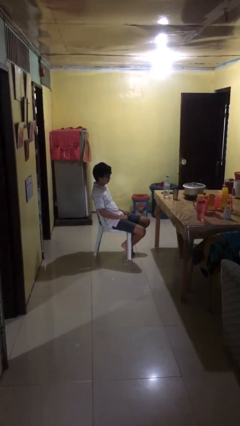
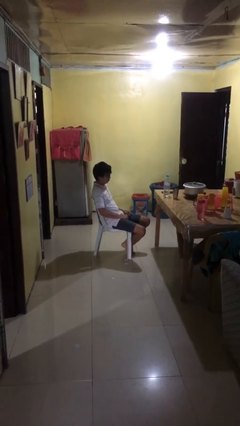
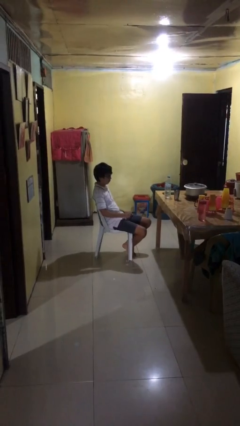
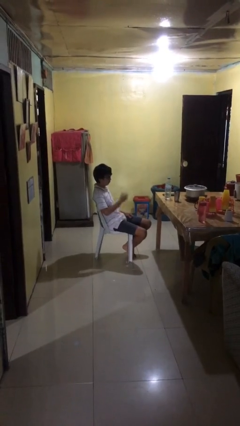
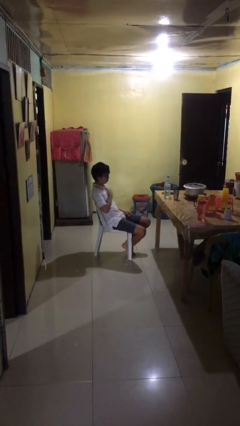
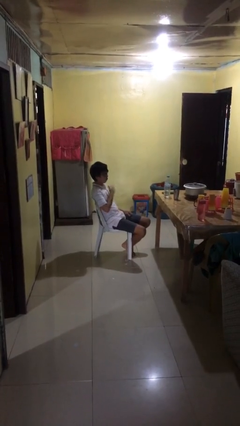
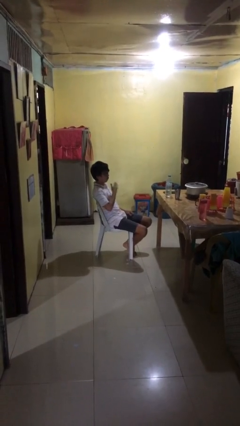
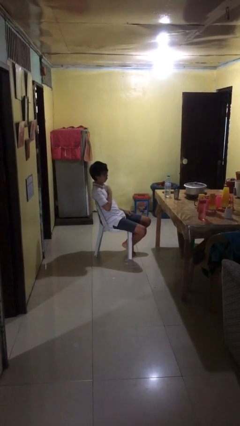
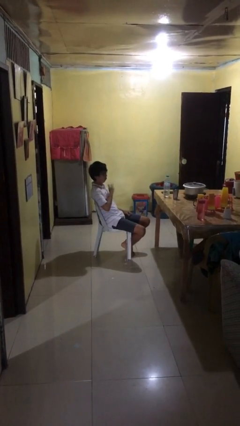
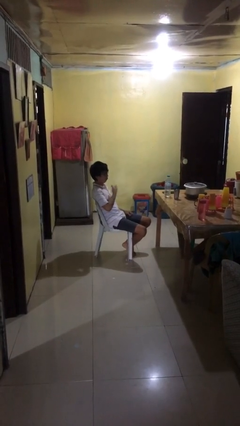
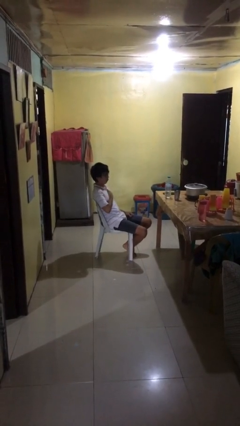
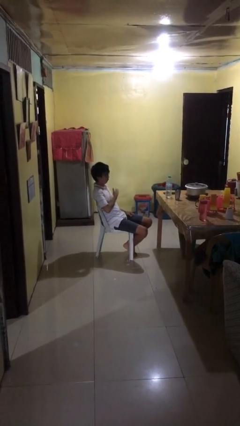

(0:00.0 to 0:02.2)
person drums on chest

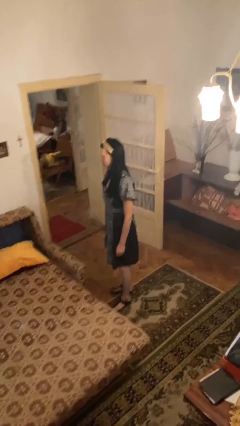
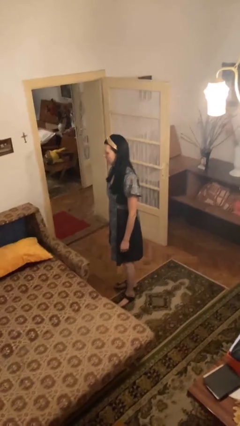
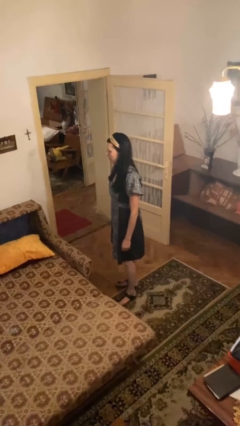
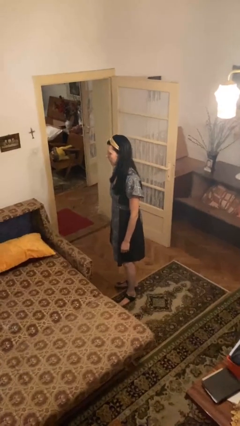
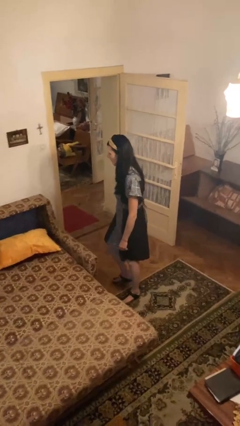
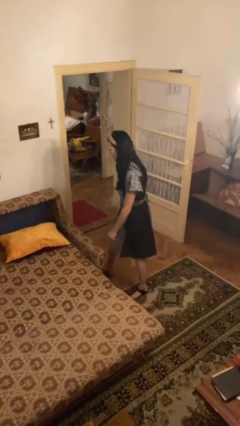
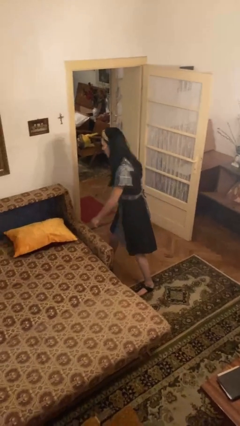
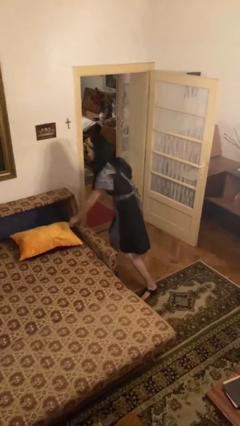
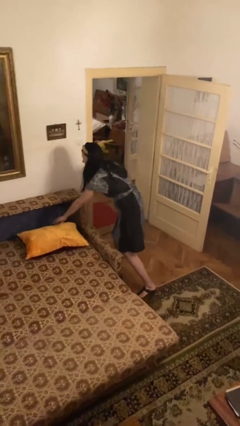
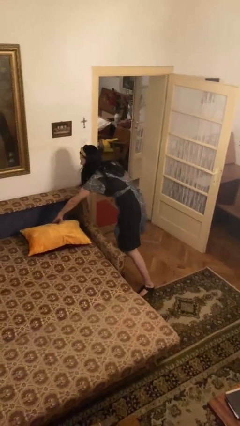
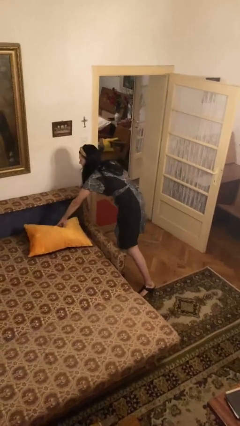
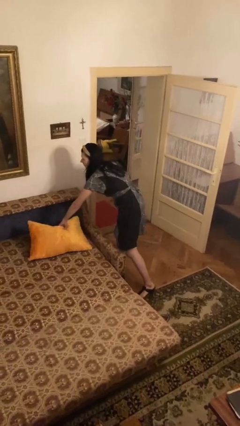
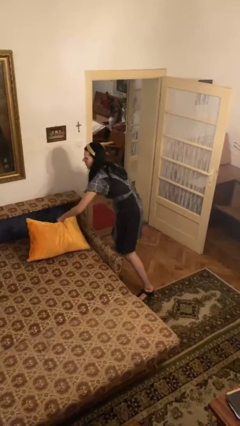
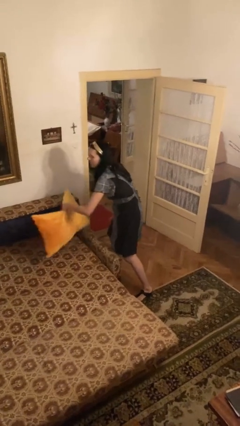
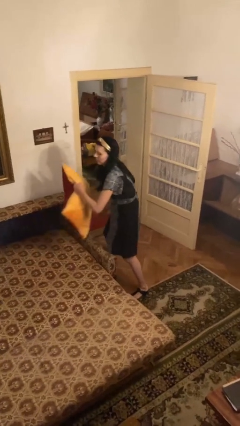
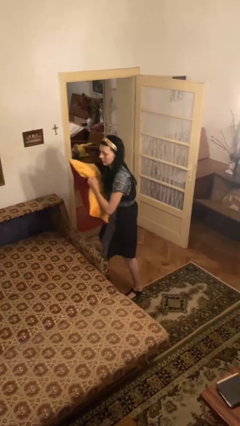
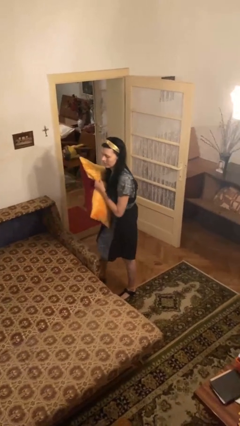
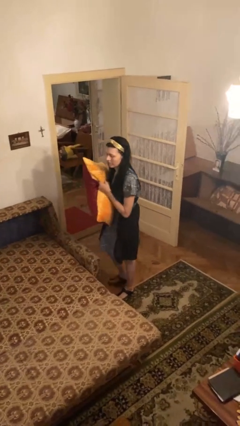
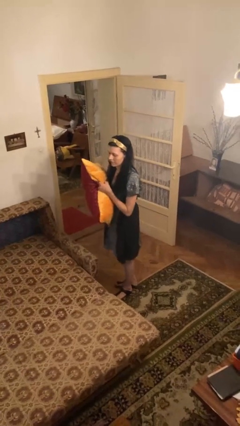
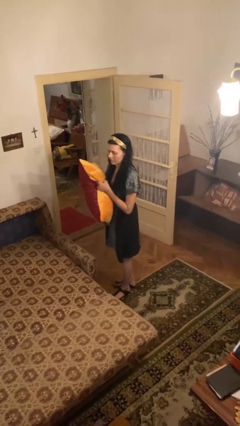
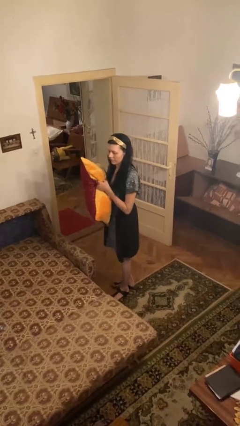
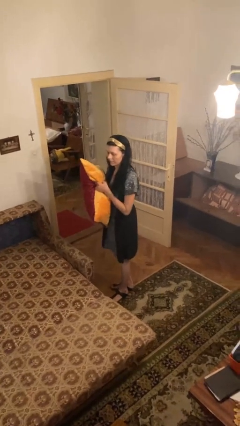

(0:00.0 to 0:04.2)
person picks up object from bed

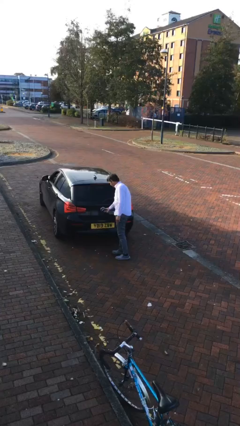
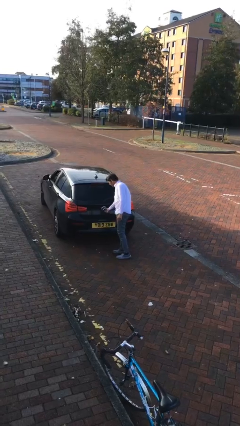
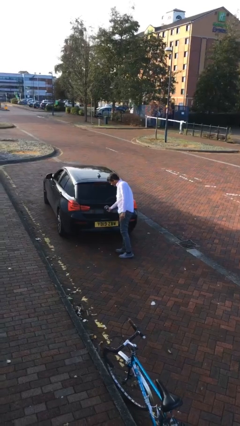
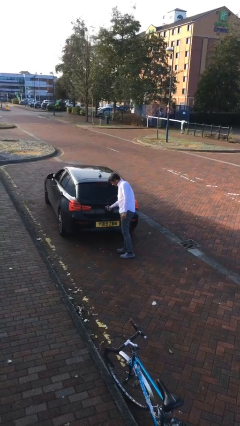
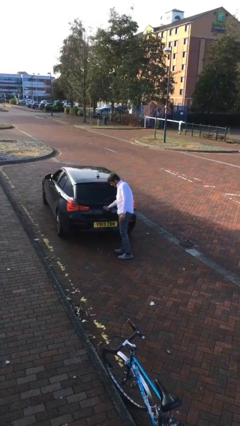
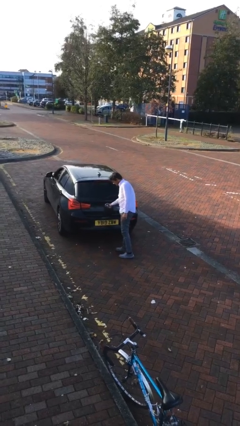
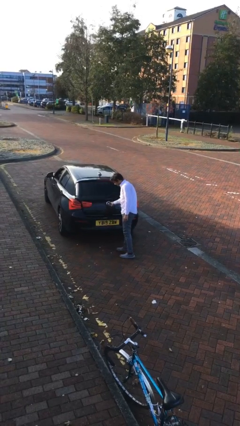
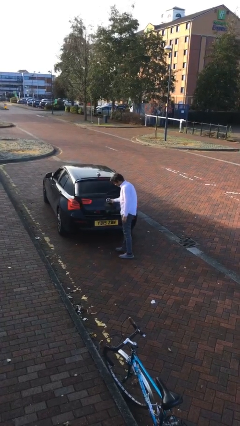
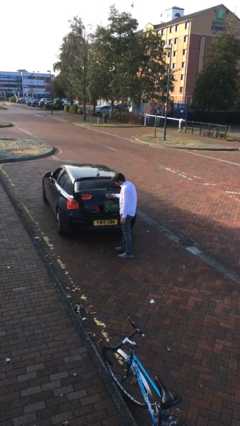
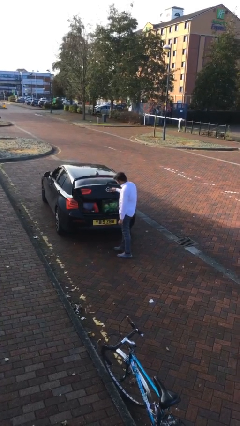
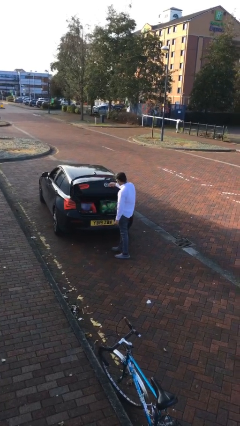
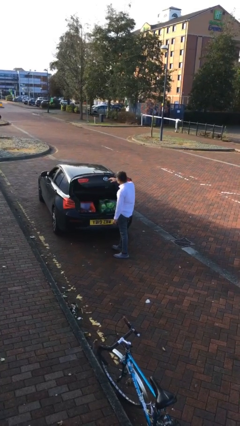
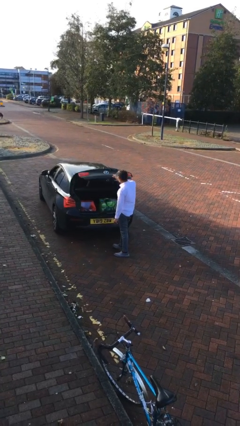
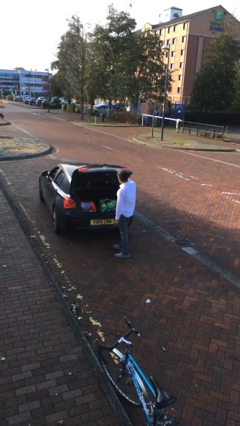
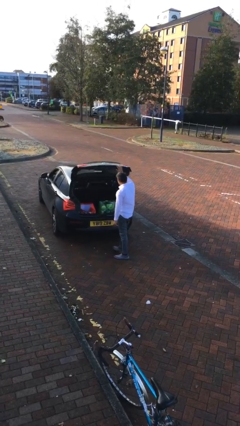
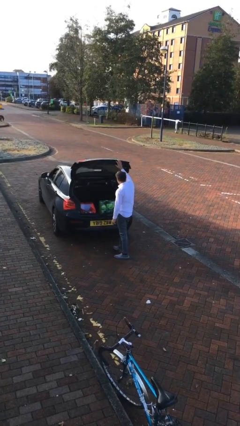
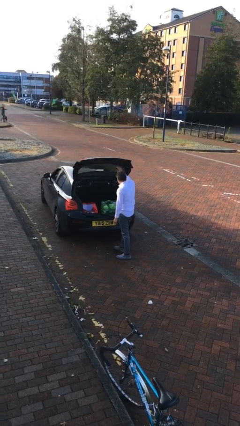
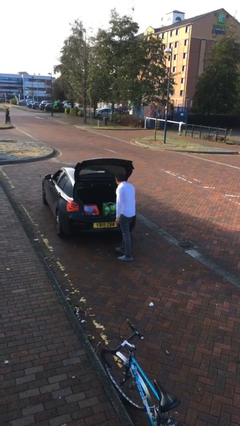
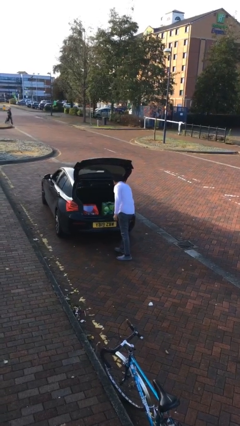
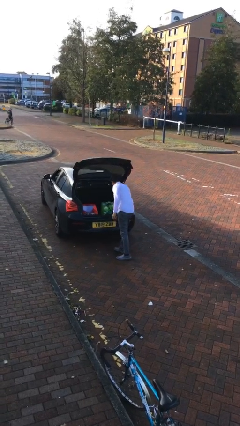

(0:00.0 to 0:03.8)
person opens car trunk

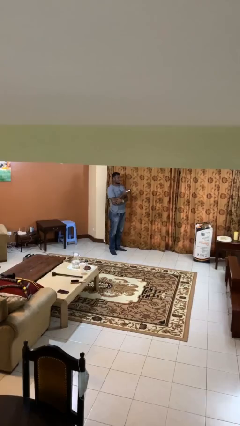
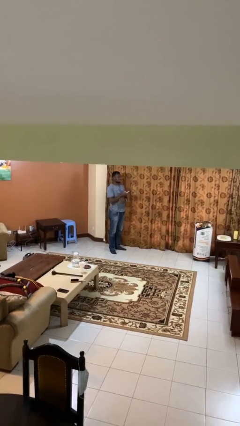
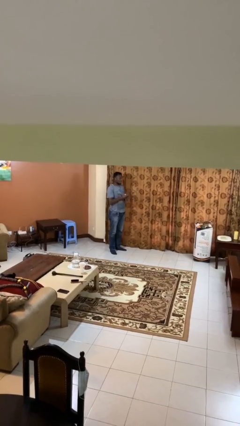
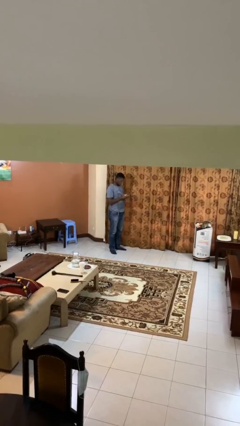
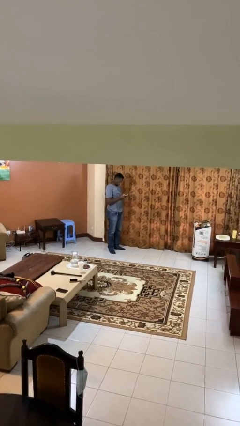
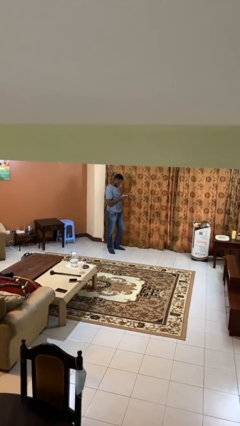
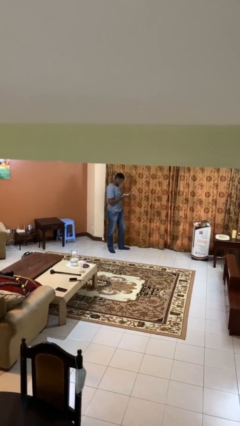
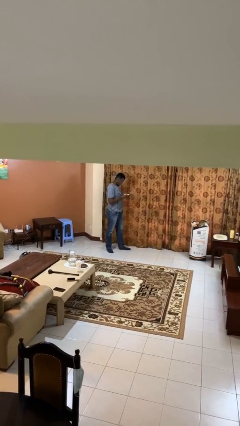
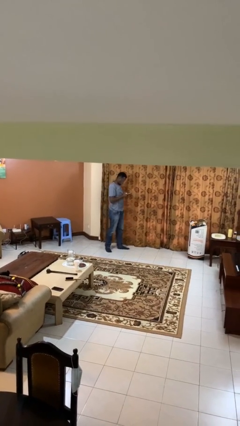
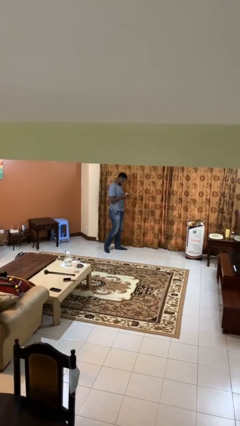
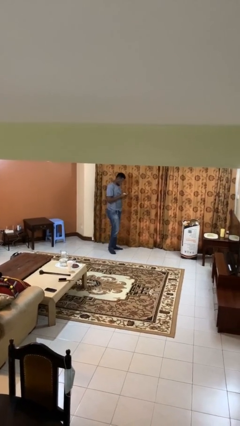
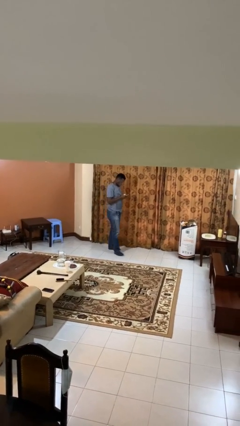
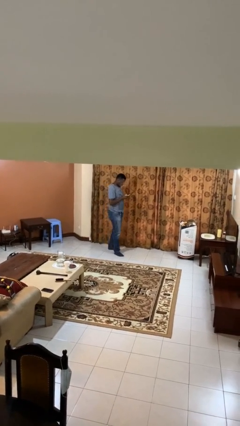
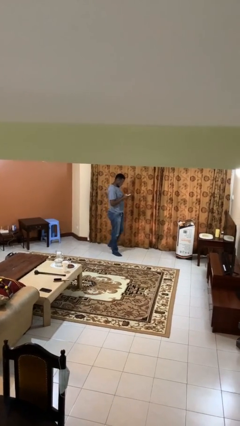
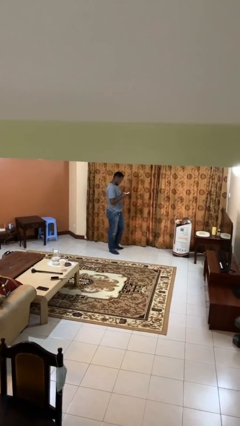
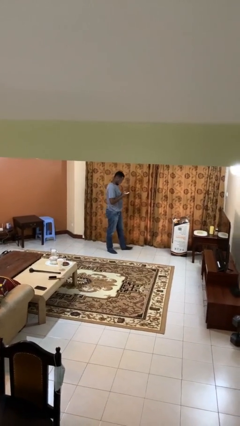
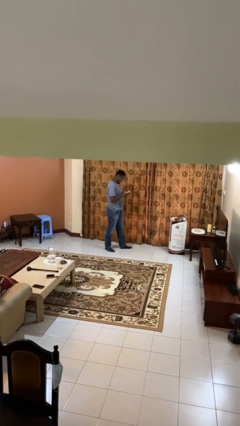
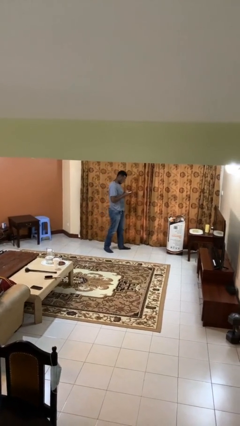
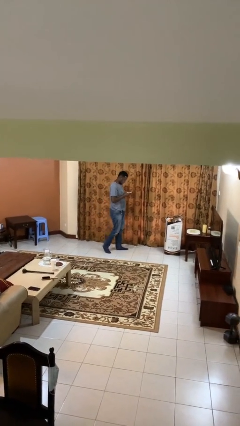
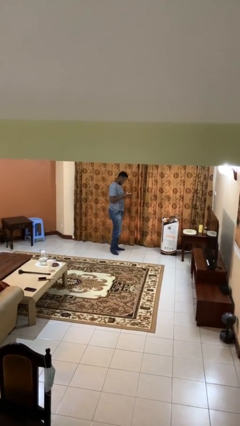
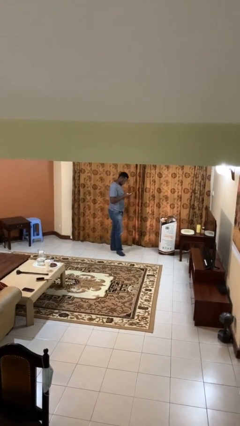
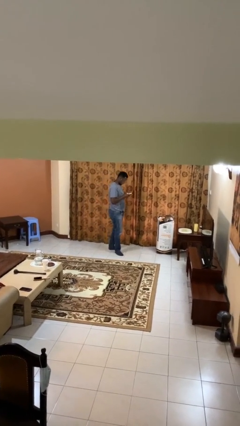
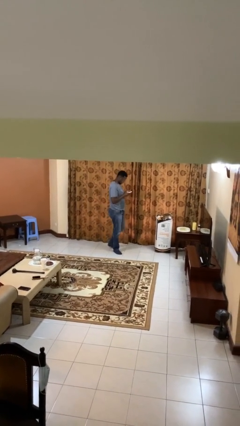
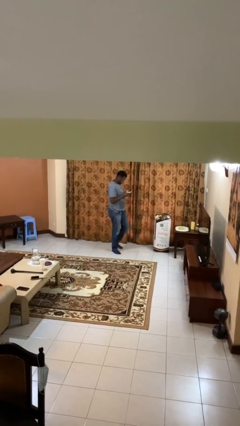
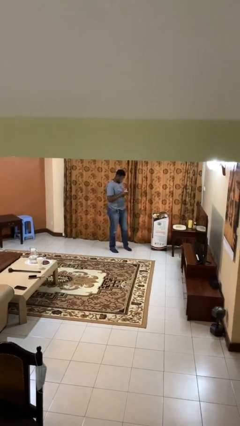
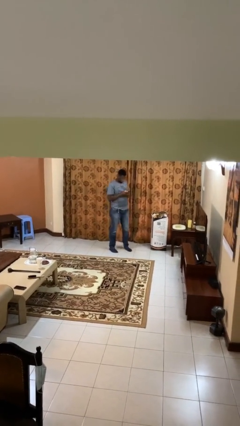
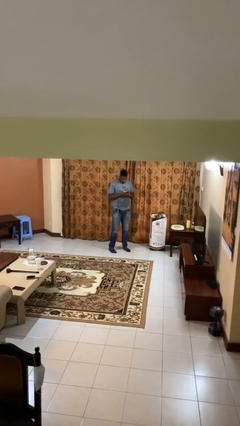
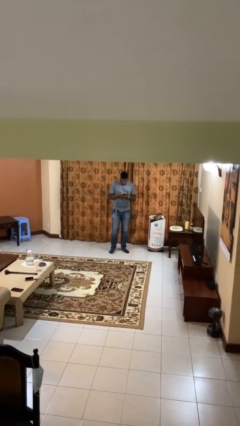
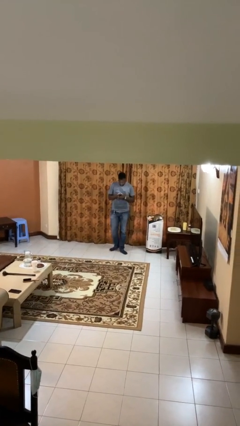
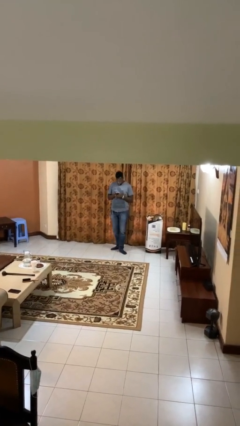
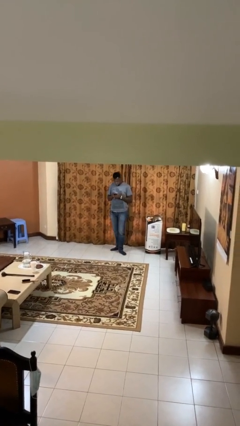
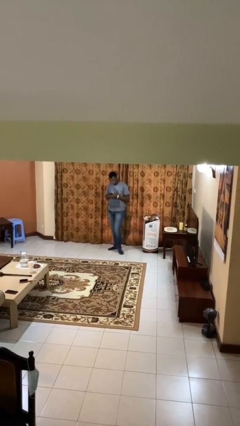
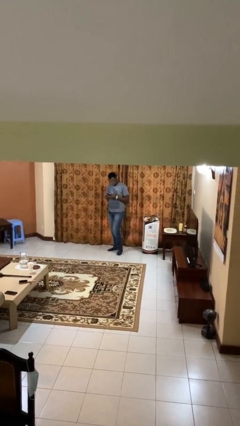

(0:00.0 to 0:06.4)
person texts on phone

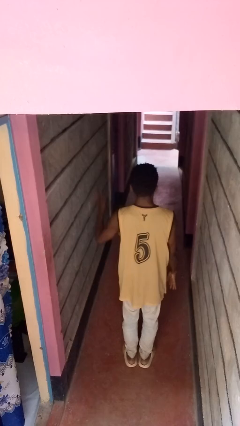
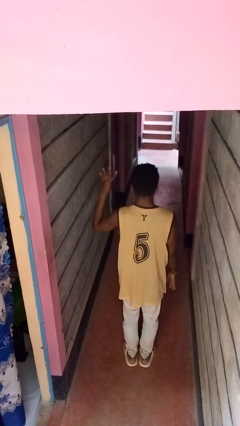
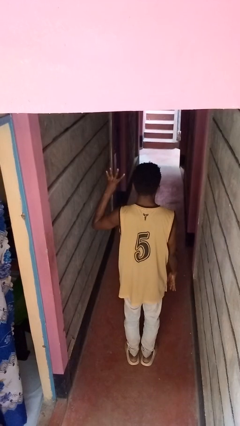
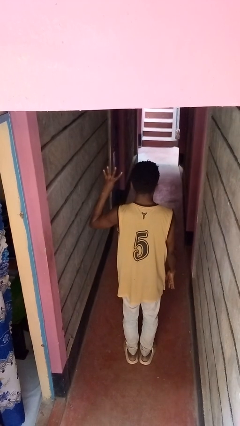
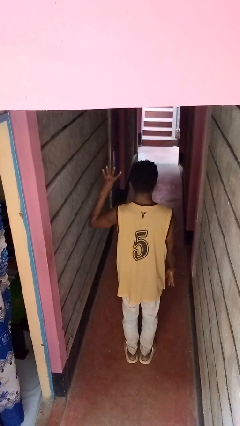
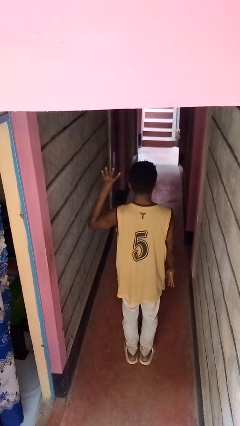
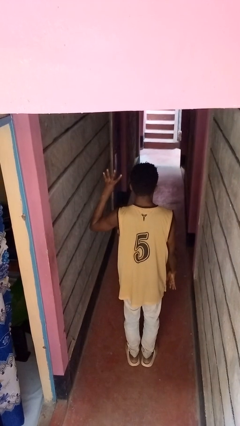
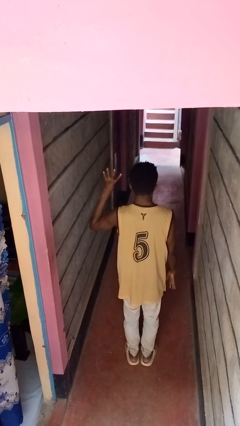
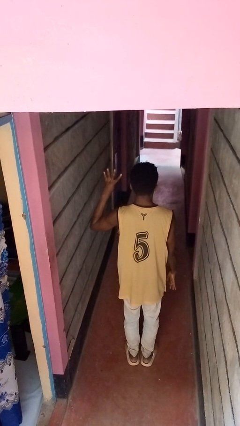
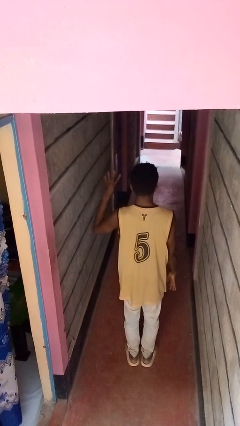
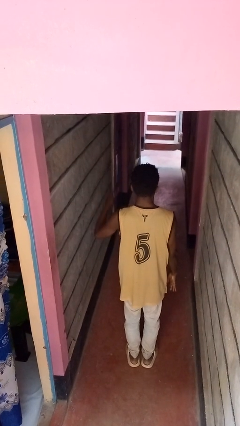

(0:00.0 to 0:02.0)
person gestures number four
